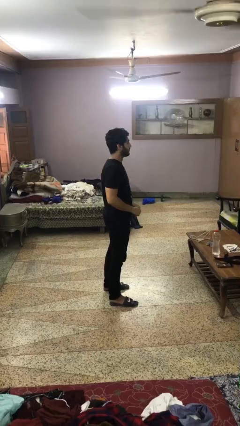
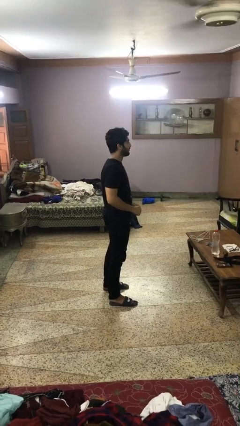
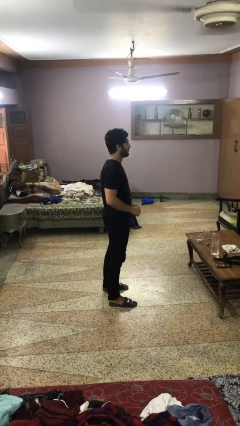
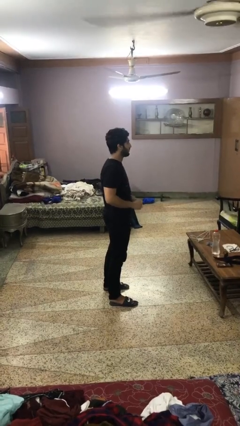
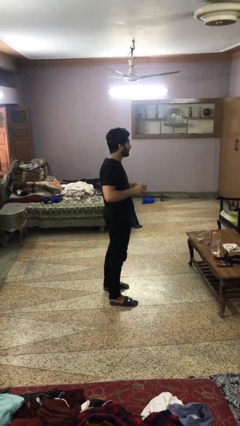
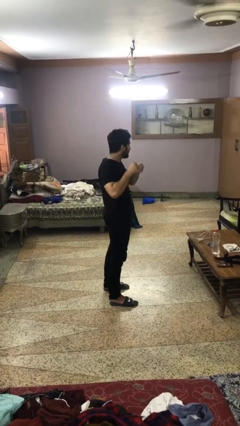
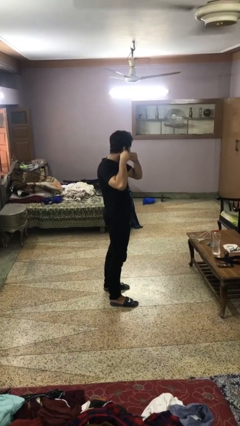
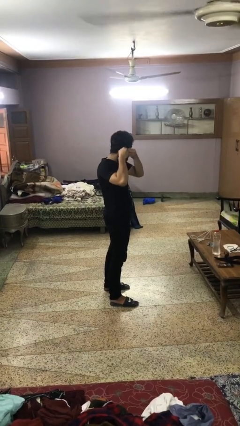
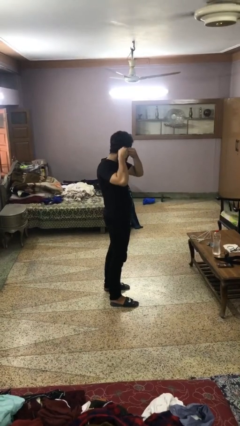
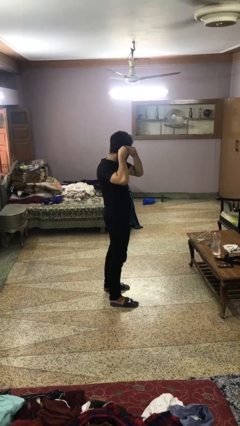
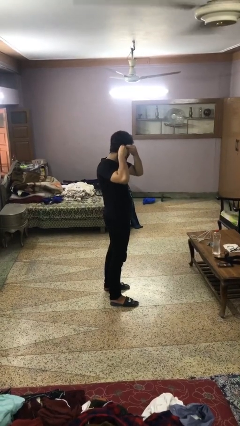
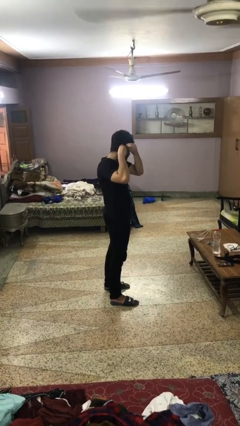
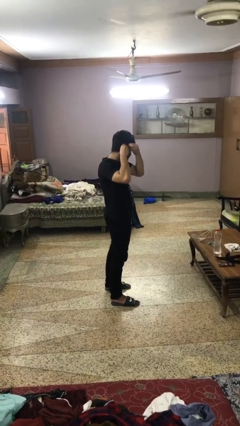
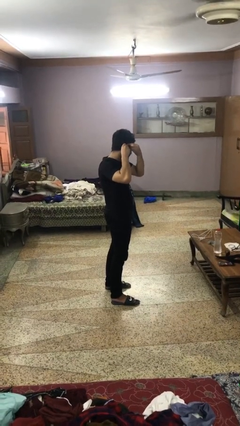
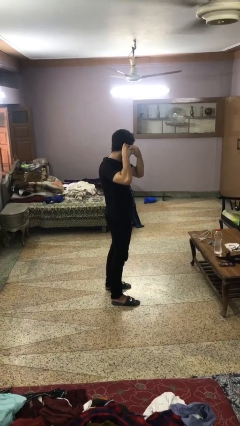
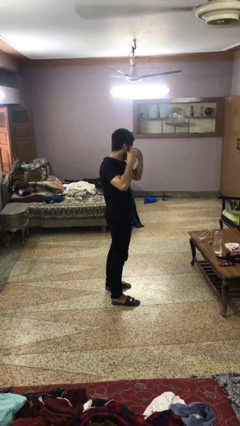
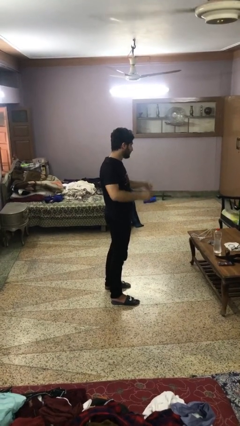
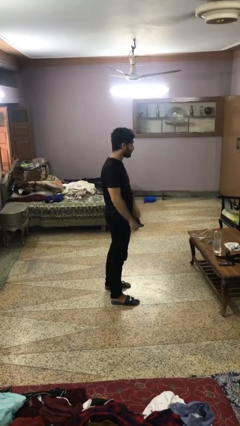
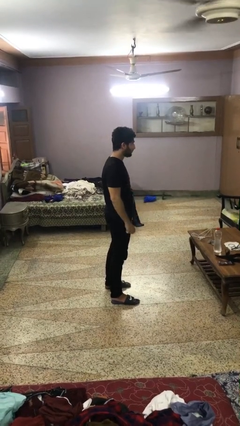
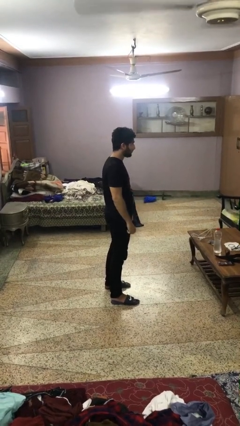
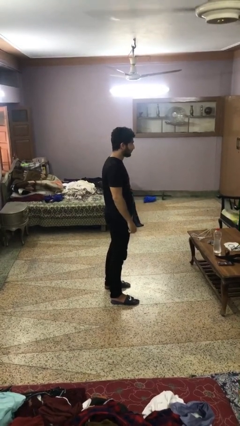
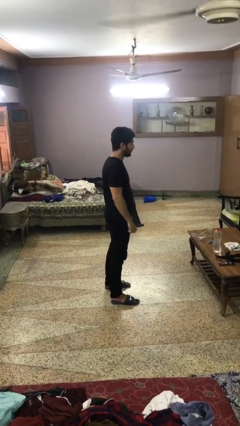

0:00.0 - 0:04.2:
person puts on earrings

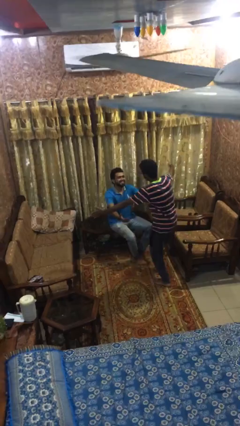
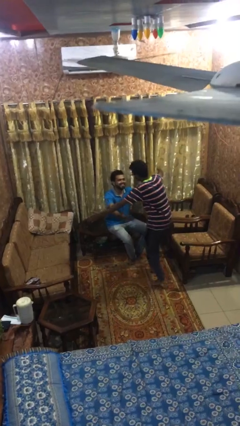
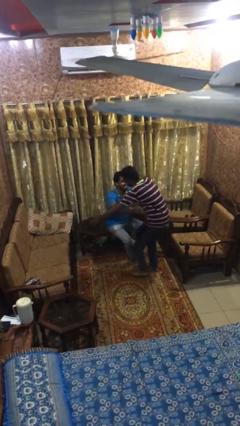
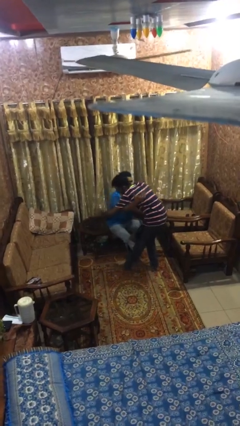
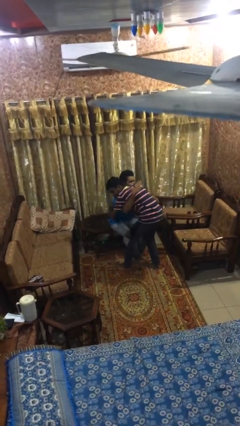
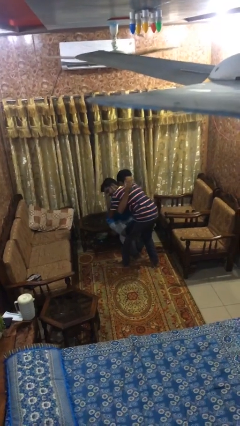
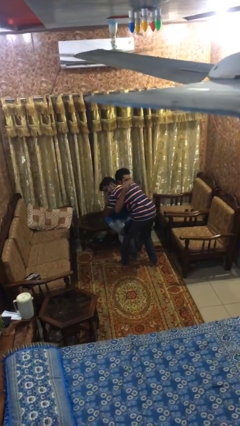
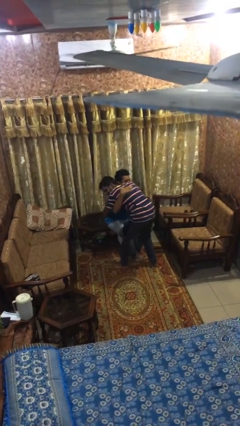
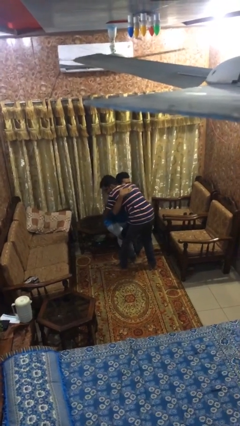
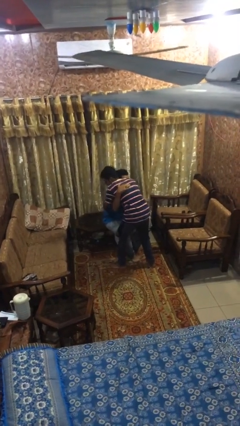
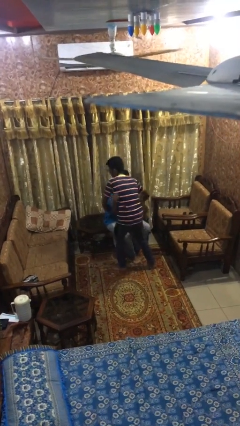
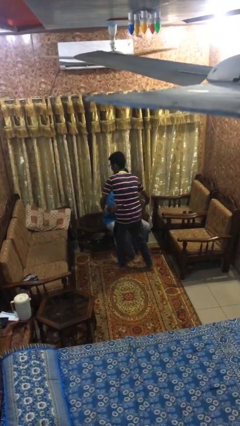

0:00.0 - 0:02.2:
person embraces person

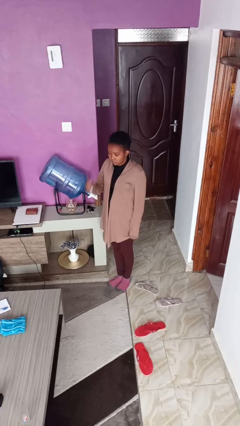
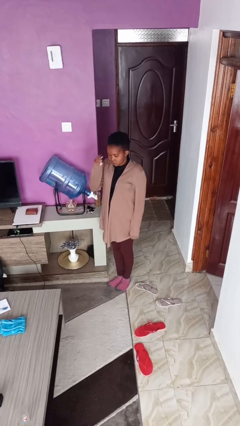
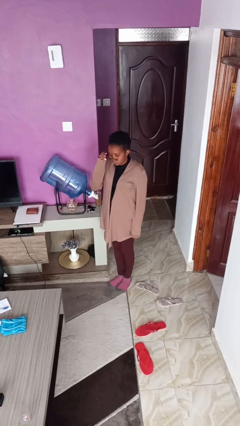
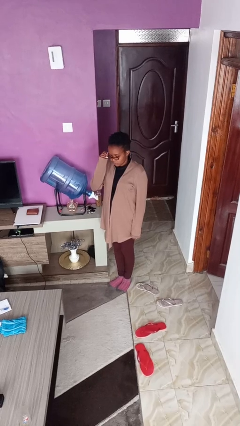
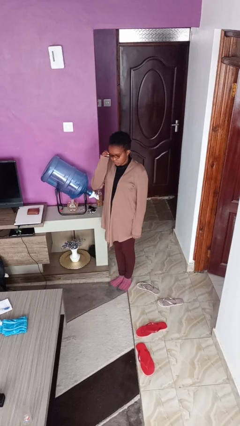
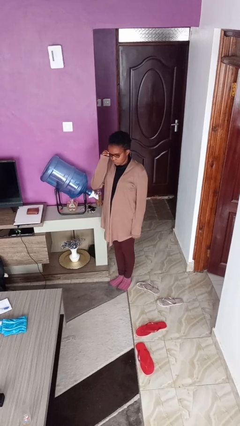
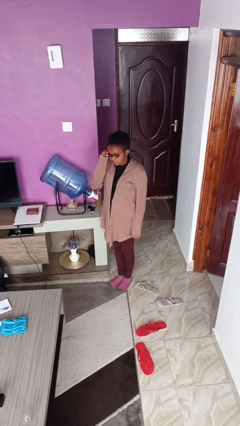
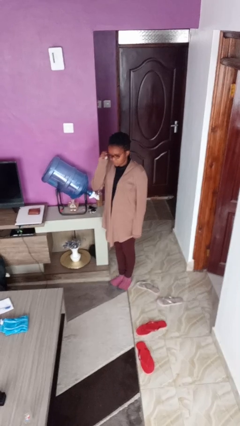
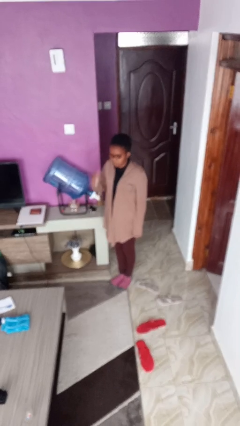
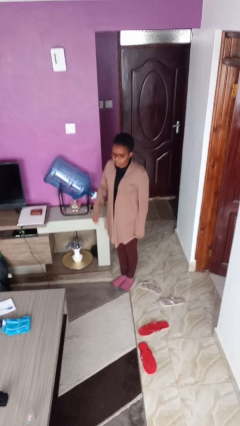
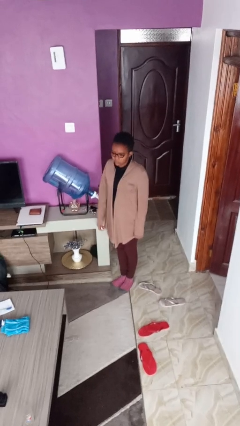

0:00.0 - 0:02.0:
person puts on glasses

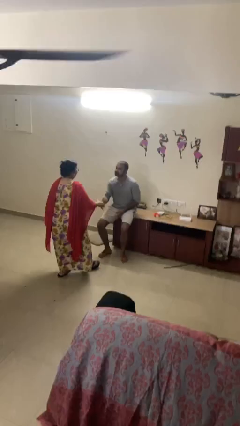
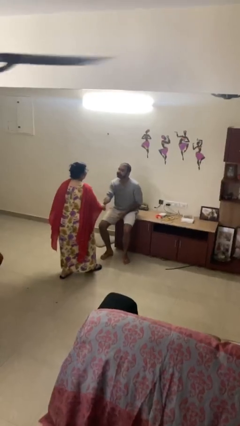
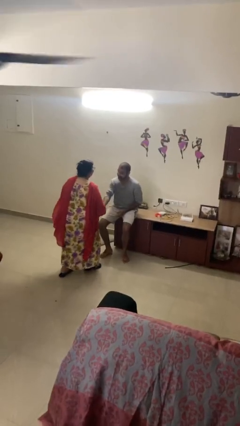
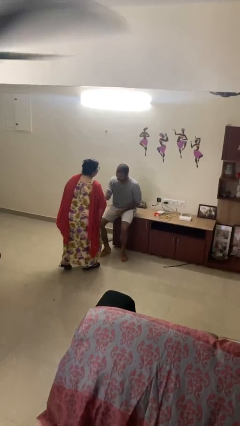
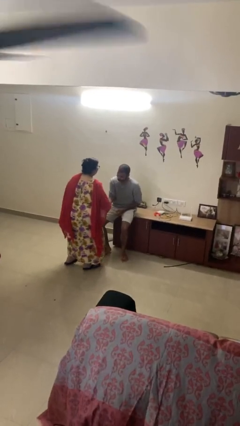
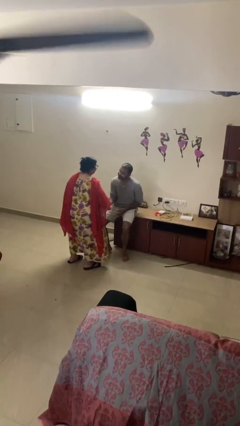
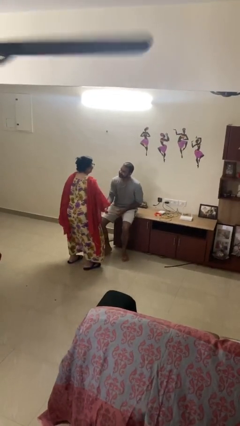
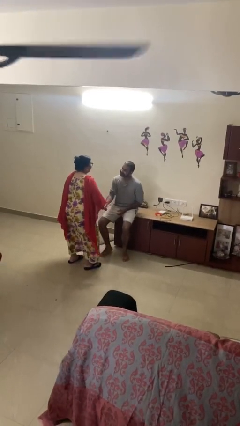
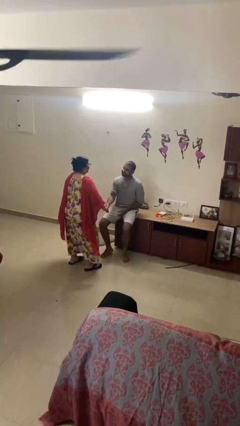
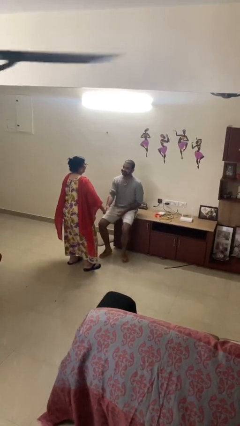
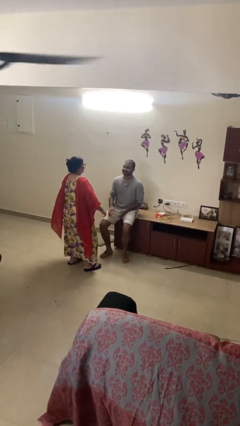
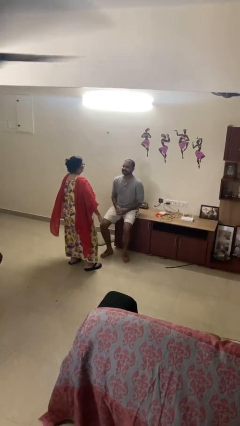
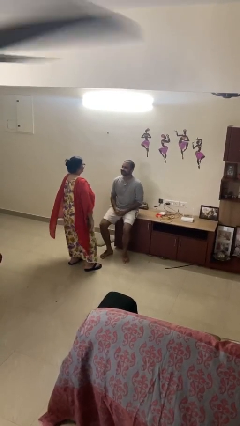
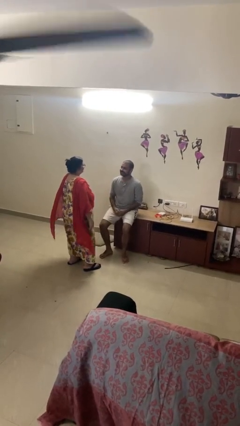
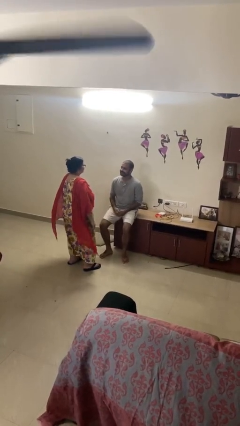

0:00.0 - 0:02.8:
person shakes hand

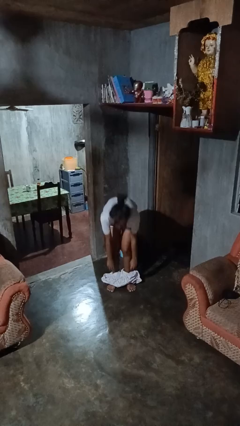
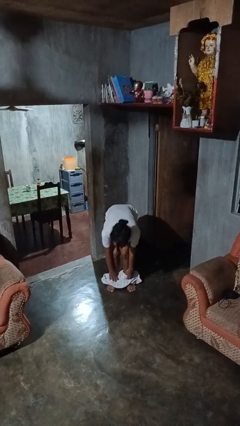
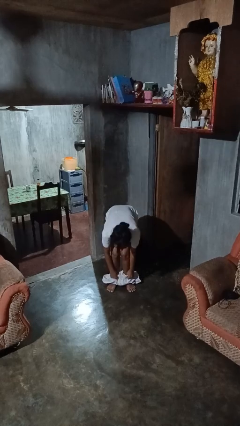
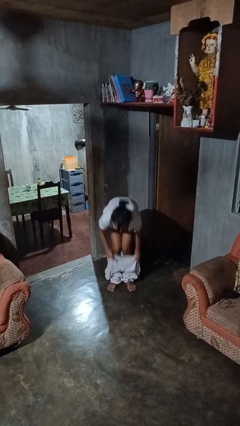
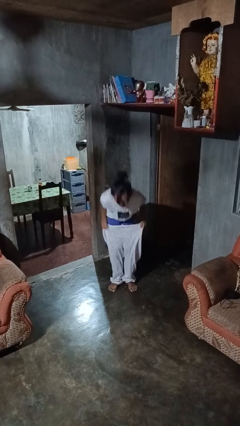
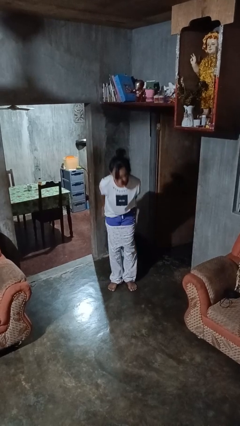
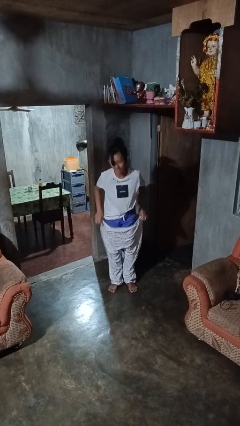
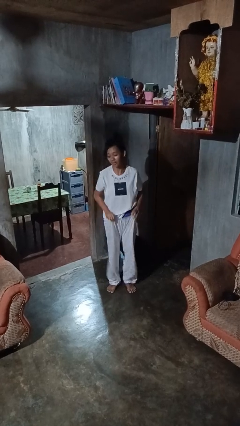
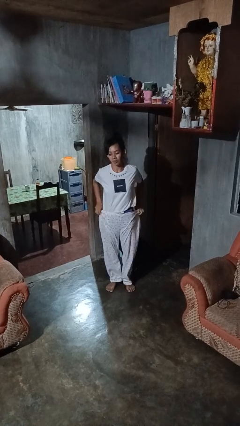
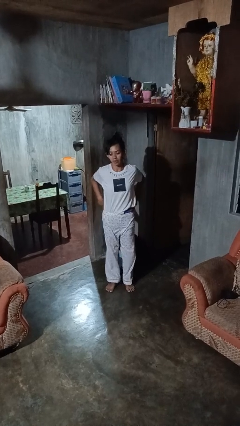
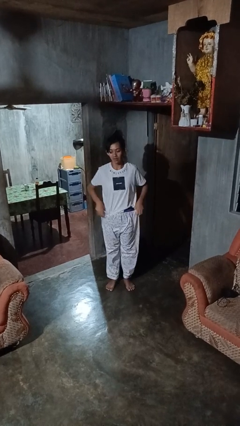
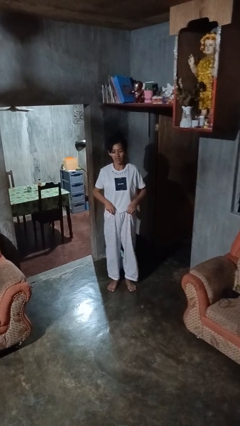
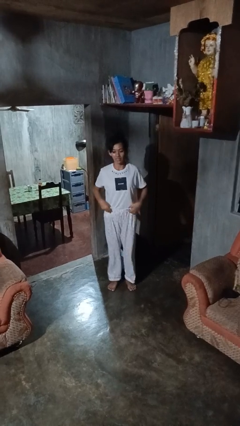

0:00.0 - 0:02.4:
person puts on pants

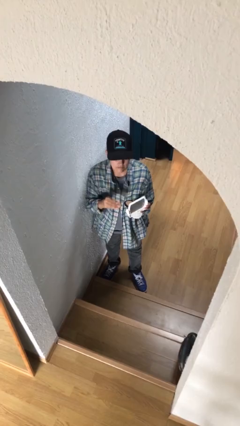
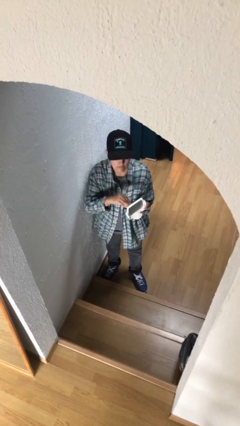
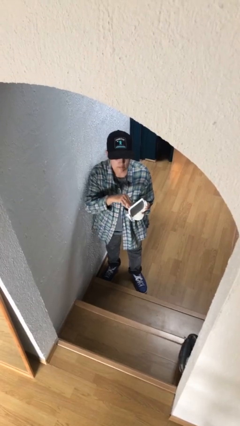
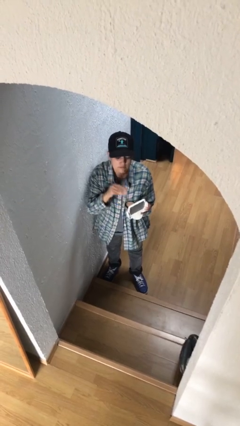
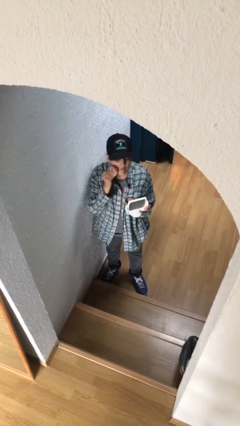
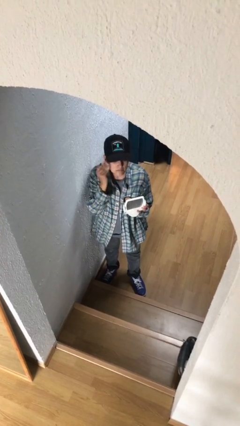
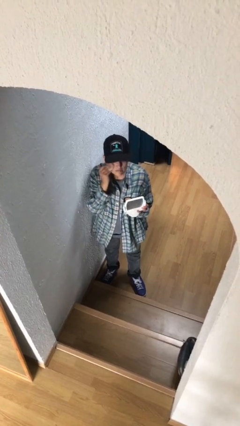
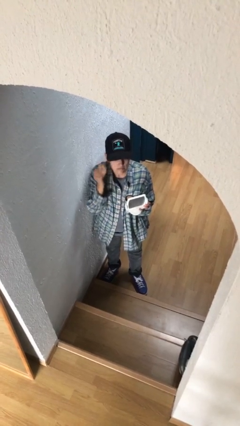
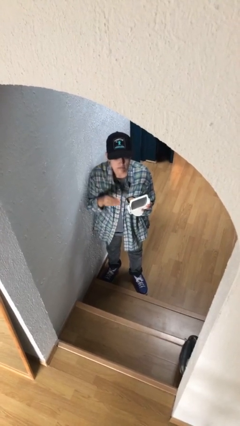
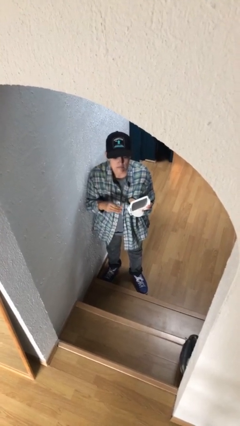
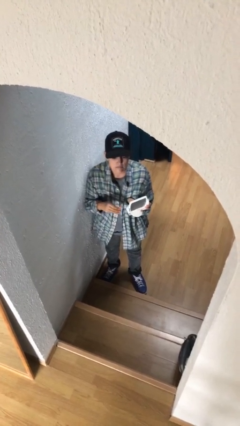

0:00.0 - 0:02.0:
person applies foundation makeup

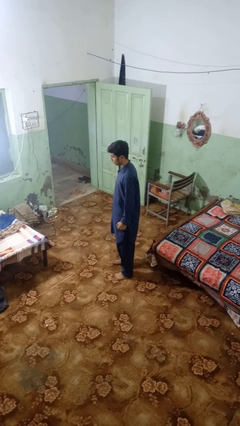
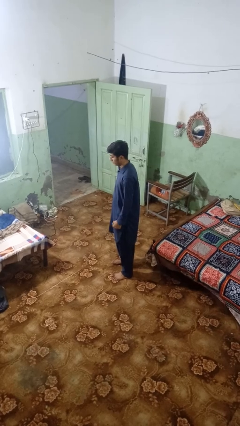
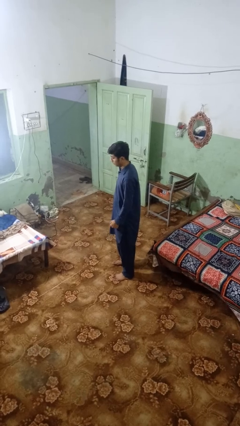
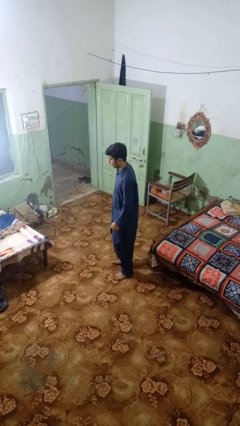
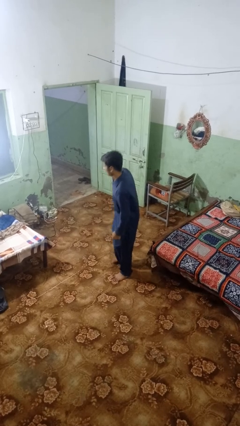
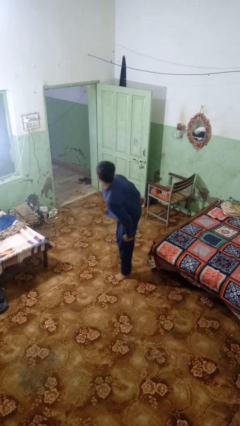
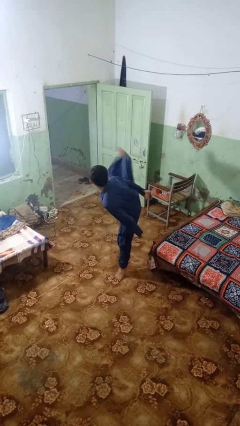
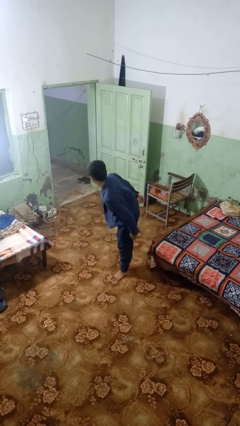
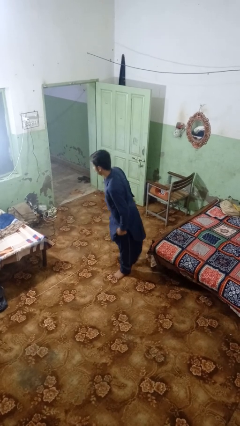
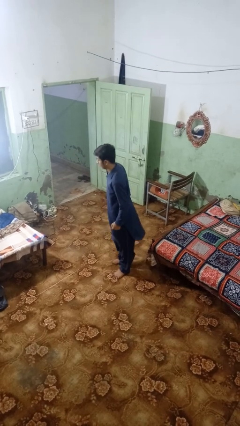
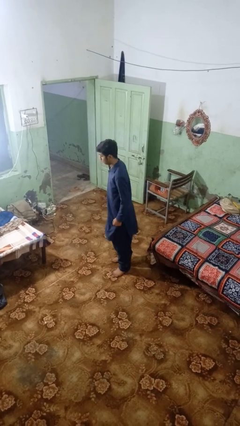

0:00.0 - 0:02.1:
person karate kicks
